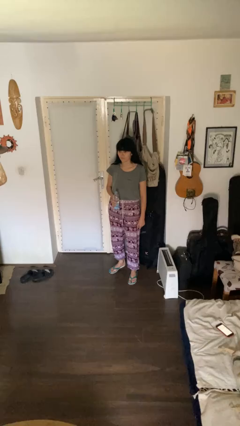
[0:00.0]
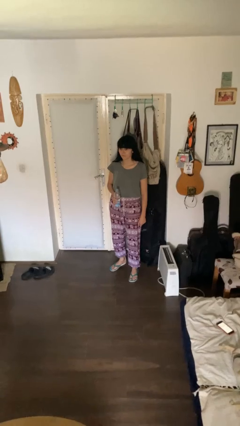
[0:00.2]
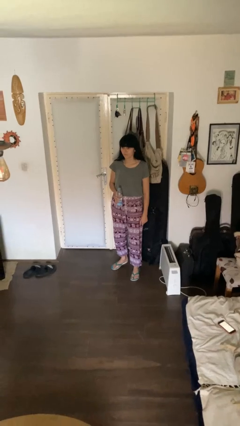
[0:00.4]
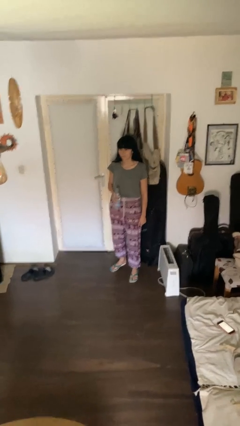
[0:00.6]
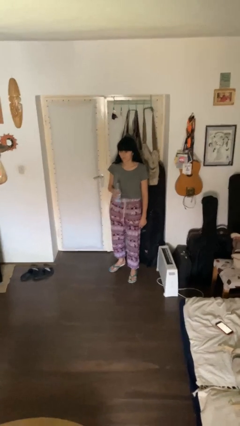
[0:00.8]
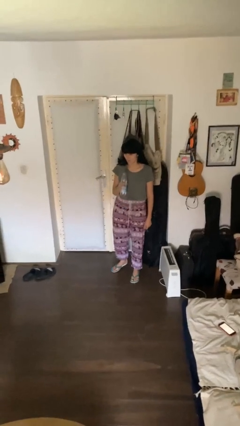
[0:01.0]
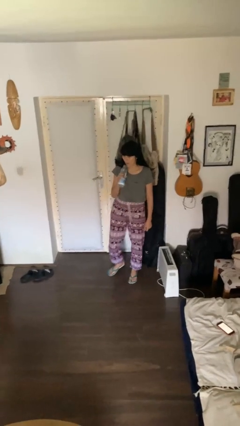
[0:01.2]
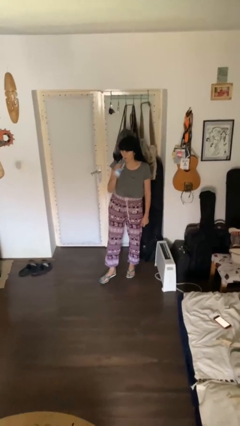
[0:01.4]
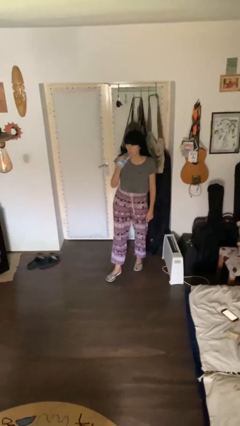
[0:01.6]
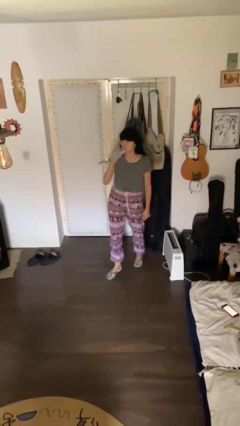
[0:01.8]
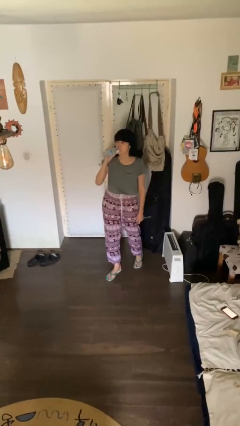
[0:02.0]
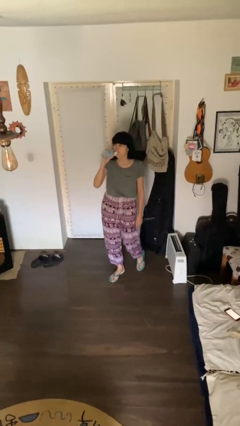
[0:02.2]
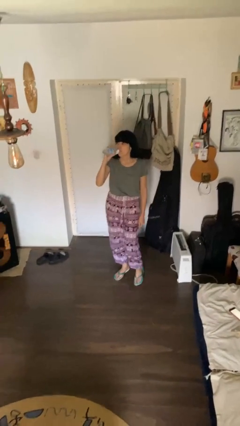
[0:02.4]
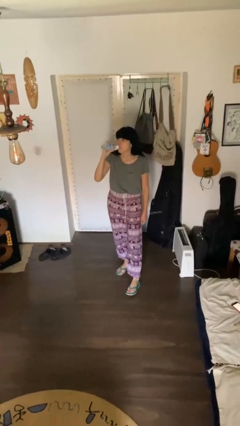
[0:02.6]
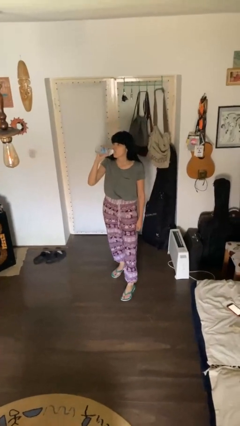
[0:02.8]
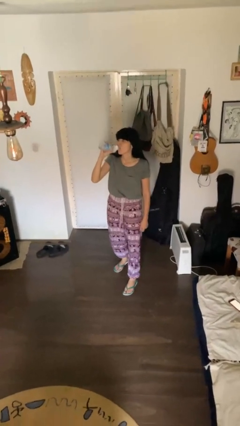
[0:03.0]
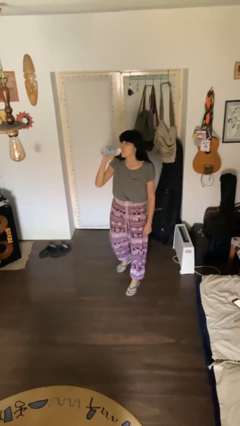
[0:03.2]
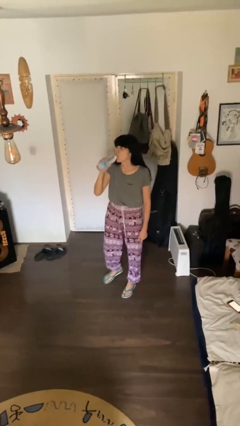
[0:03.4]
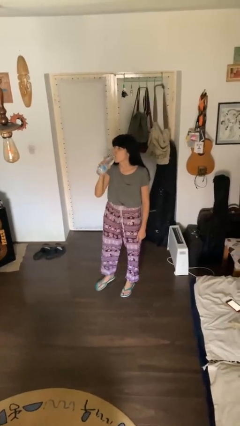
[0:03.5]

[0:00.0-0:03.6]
person drinks from bottle

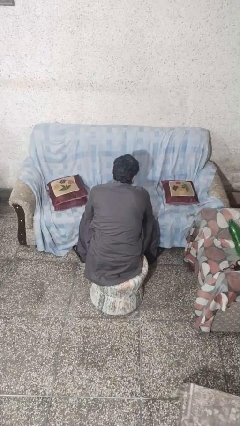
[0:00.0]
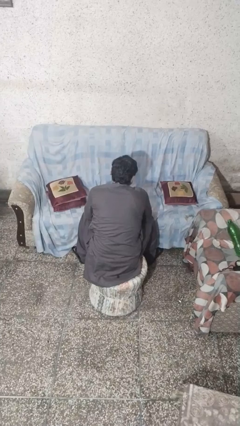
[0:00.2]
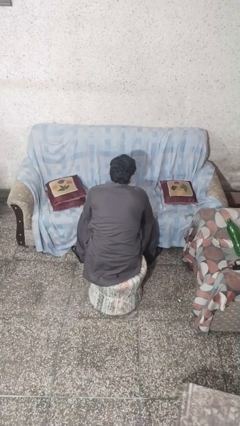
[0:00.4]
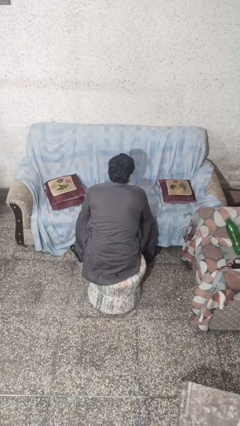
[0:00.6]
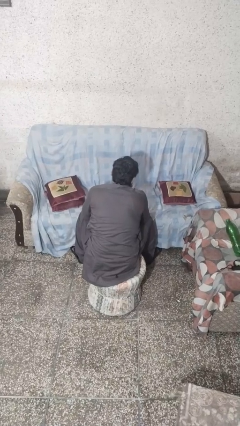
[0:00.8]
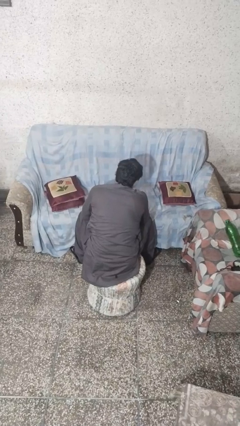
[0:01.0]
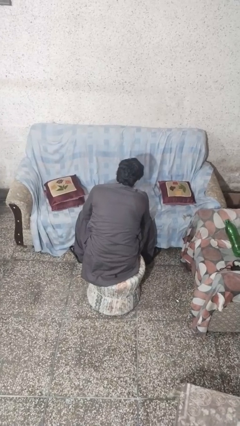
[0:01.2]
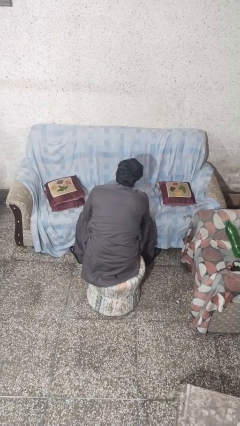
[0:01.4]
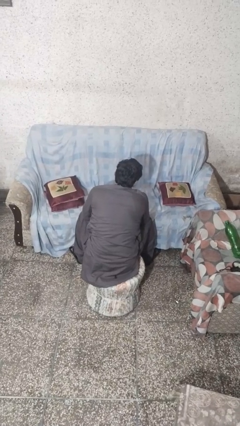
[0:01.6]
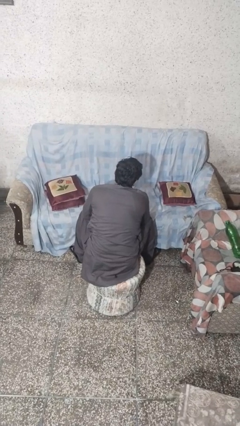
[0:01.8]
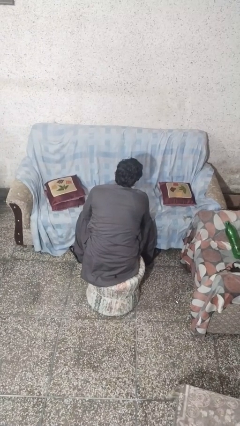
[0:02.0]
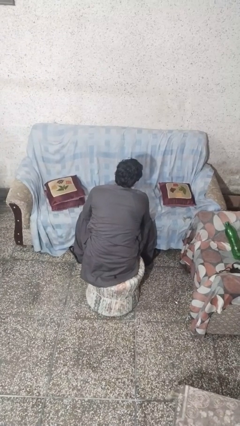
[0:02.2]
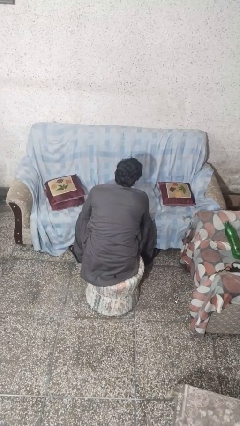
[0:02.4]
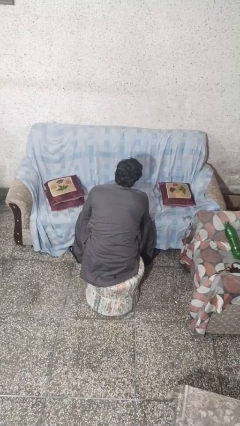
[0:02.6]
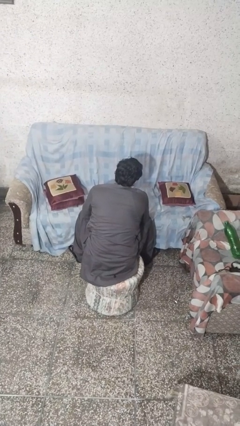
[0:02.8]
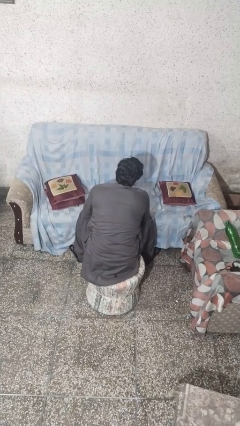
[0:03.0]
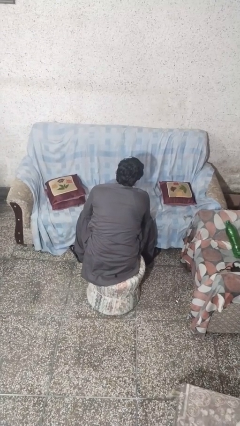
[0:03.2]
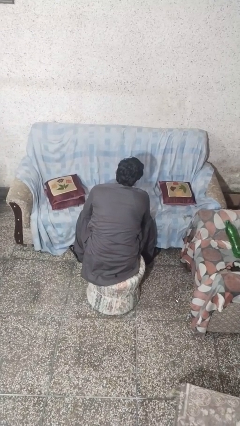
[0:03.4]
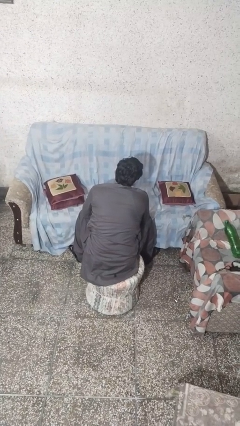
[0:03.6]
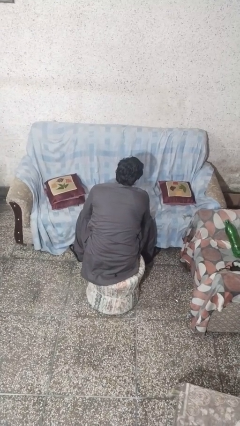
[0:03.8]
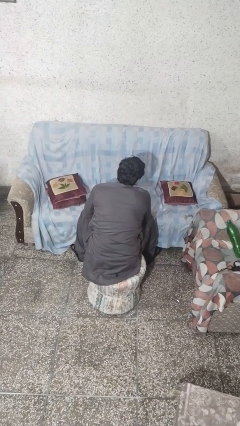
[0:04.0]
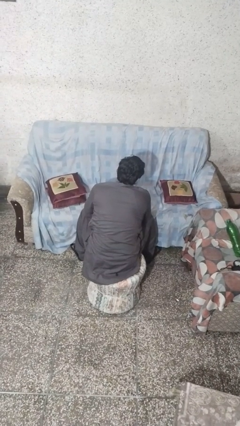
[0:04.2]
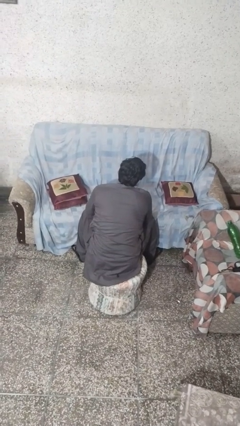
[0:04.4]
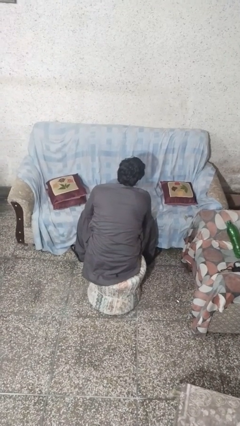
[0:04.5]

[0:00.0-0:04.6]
person strokes chin

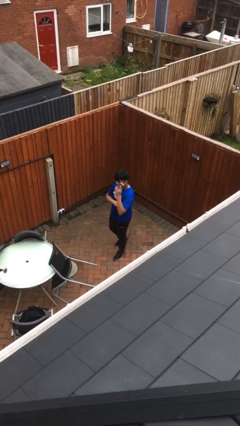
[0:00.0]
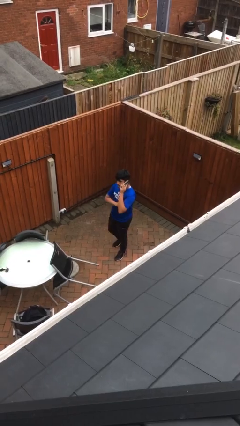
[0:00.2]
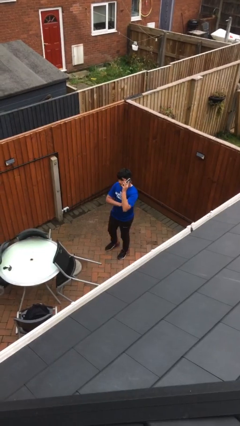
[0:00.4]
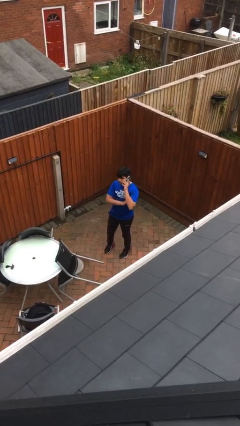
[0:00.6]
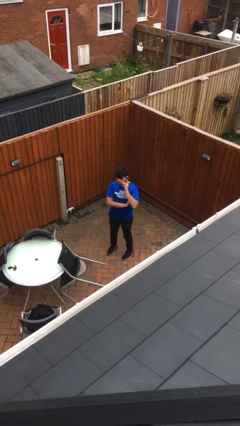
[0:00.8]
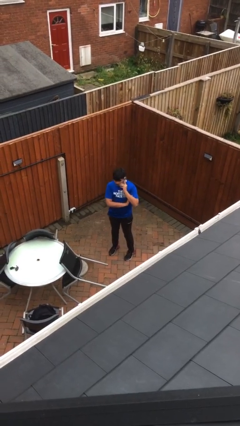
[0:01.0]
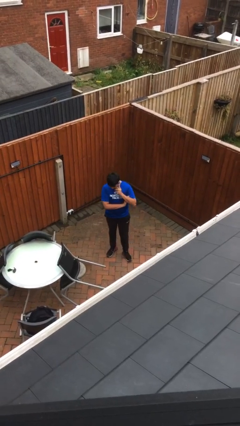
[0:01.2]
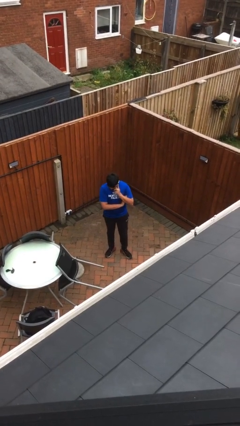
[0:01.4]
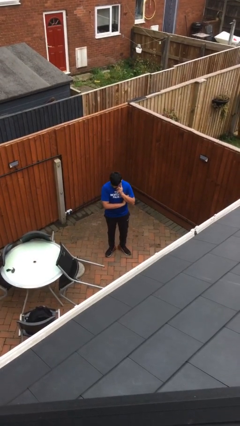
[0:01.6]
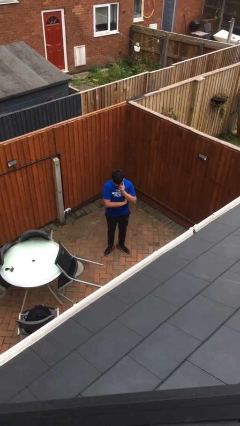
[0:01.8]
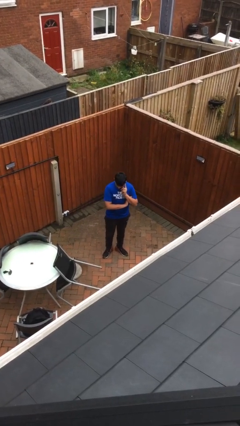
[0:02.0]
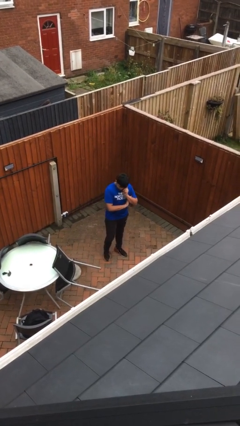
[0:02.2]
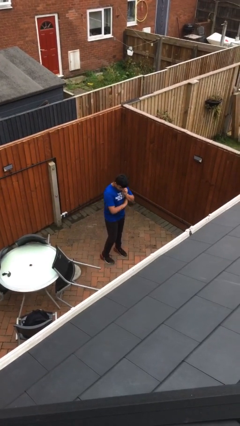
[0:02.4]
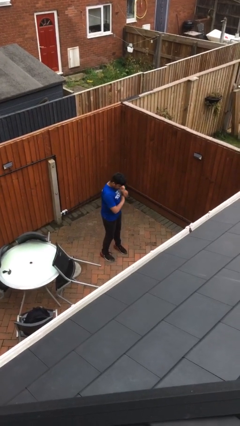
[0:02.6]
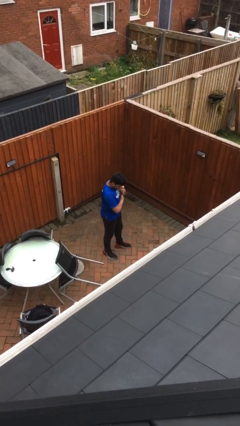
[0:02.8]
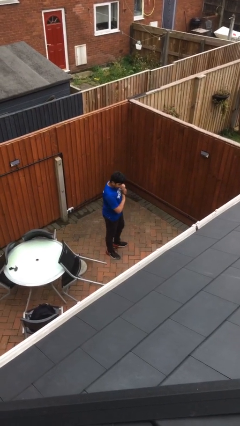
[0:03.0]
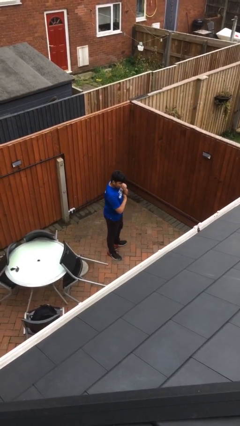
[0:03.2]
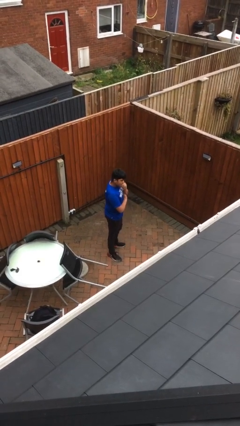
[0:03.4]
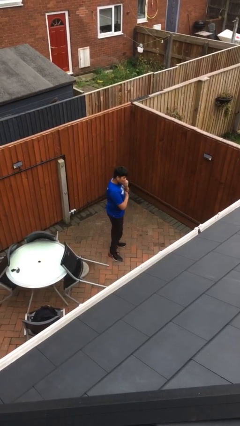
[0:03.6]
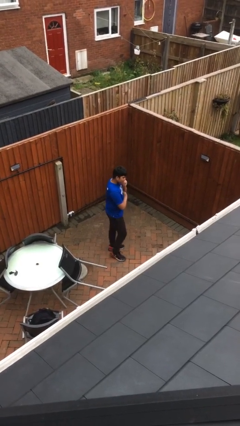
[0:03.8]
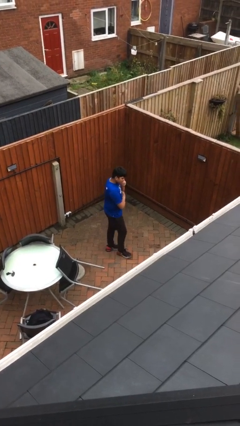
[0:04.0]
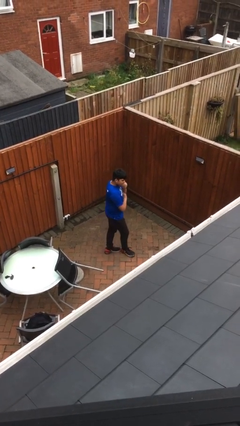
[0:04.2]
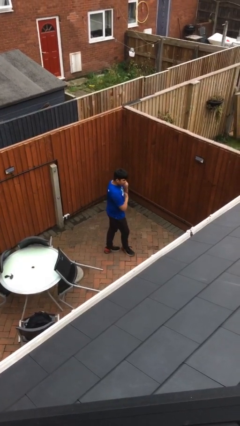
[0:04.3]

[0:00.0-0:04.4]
person talks on phone

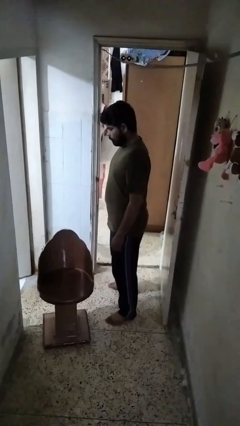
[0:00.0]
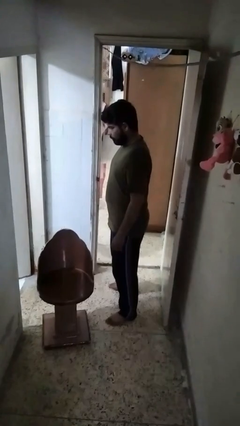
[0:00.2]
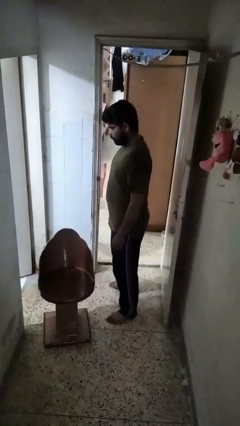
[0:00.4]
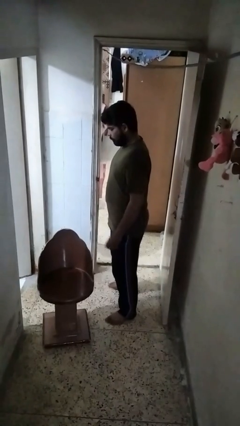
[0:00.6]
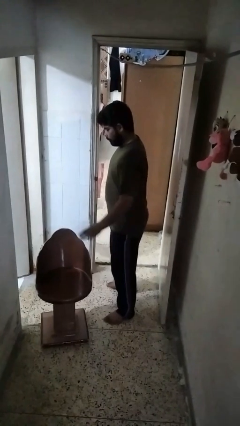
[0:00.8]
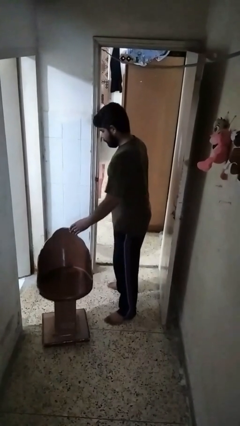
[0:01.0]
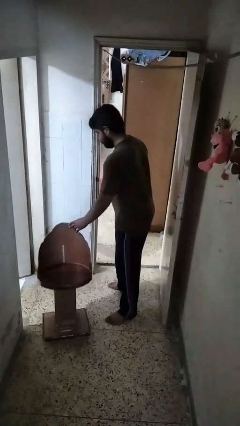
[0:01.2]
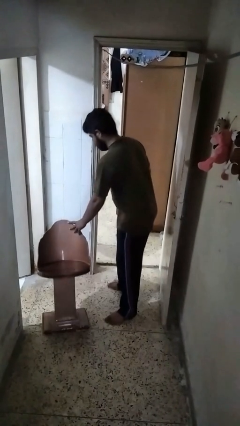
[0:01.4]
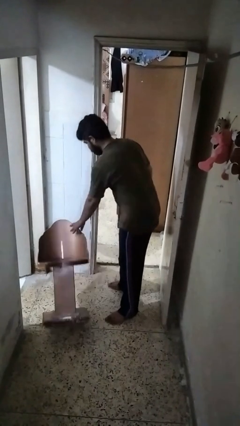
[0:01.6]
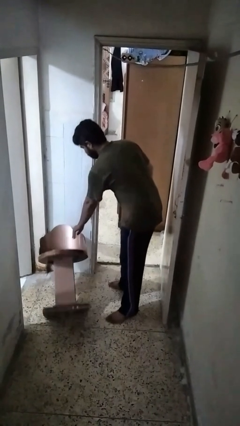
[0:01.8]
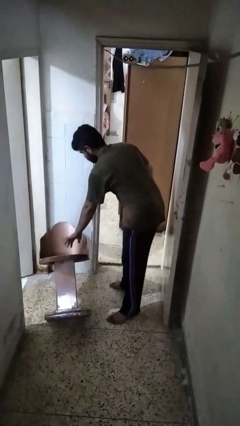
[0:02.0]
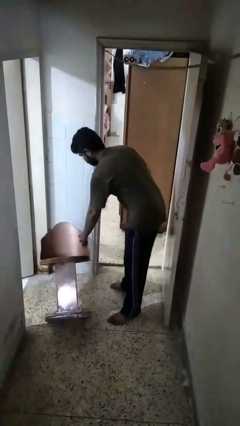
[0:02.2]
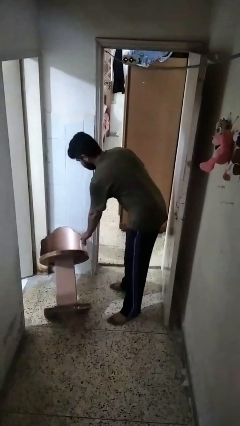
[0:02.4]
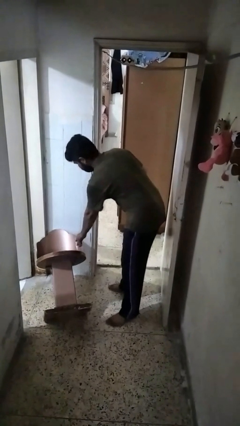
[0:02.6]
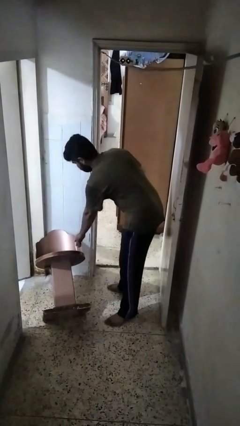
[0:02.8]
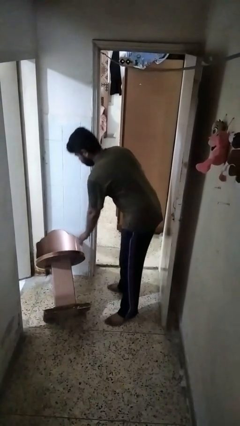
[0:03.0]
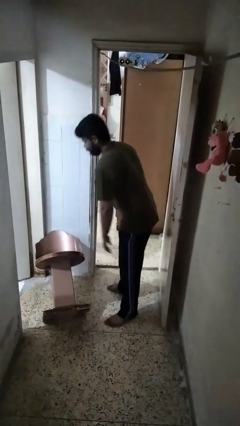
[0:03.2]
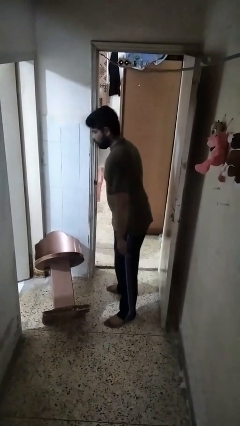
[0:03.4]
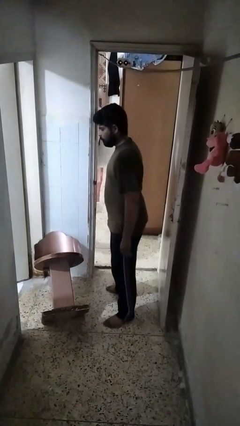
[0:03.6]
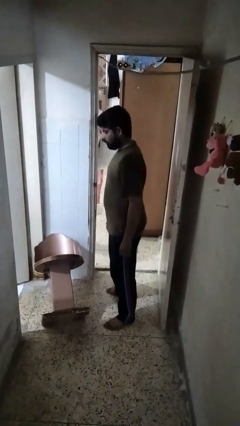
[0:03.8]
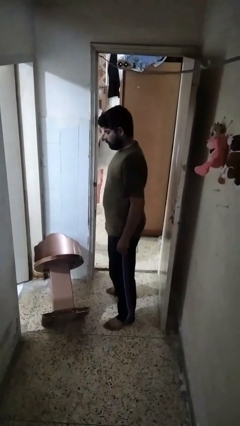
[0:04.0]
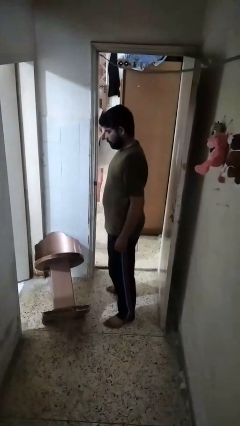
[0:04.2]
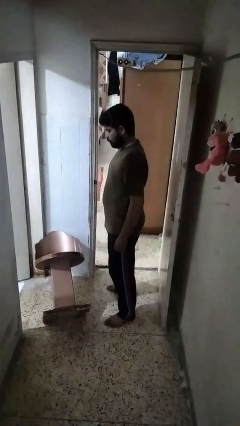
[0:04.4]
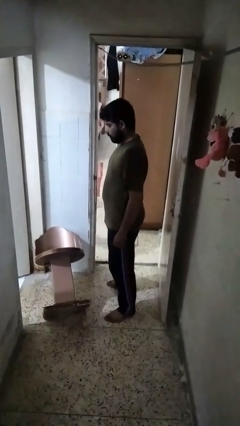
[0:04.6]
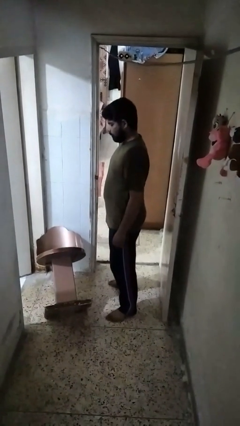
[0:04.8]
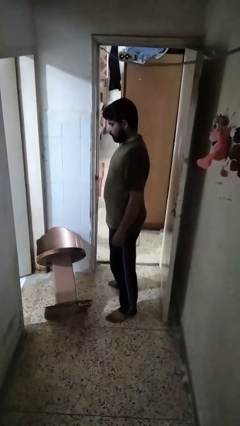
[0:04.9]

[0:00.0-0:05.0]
person knocks over furniture

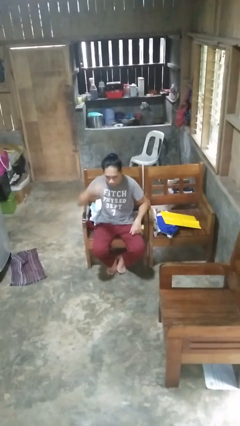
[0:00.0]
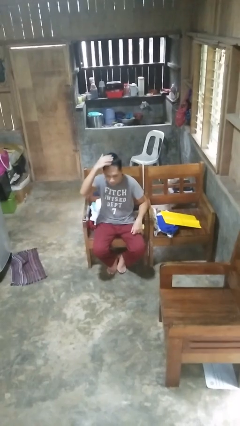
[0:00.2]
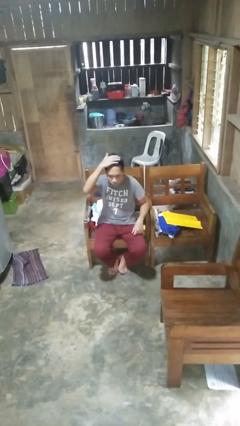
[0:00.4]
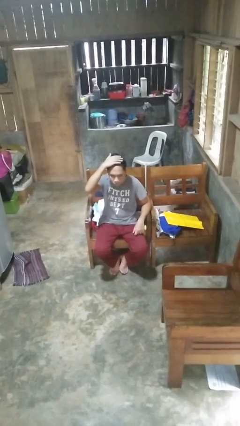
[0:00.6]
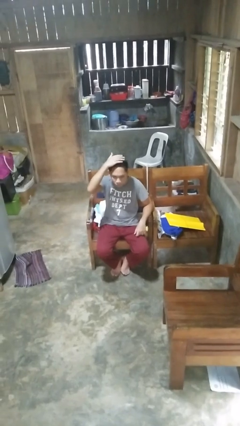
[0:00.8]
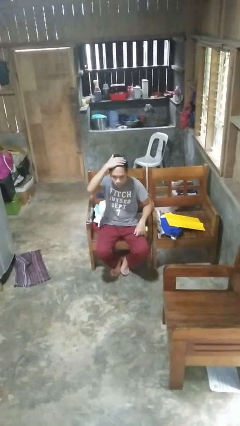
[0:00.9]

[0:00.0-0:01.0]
person pats head
